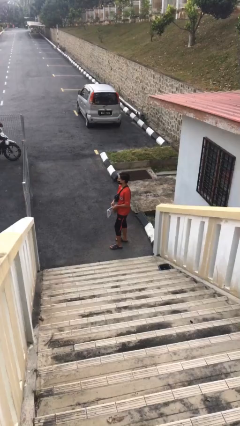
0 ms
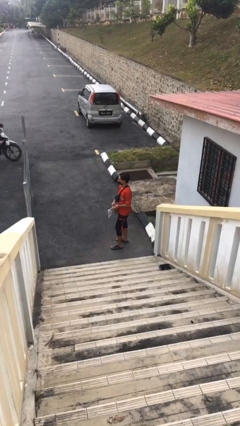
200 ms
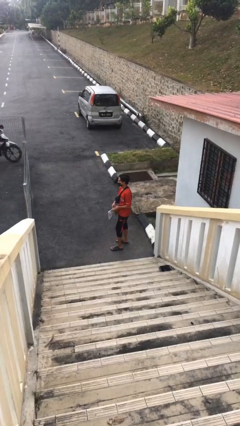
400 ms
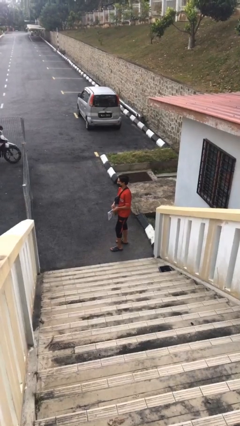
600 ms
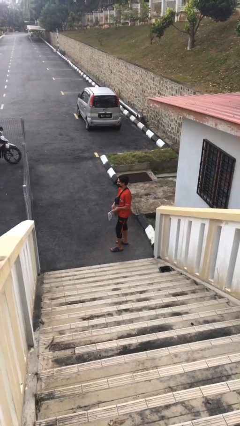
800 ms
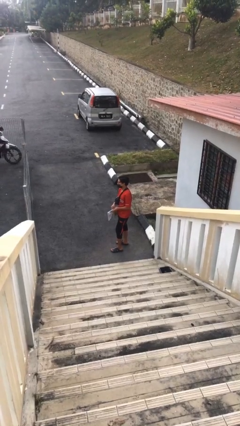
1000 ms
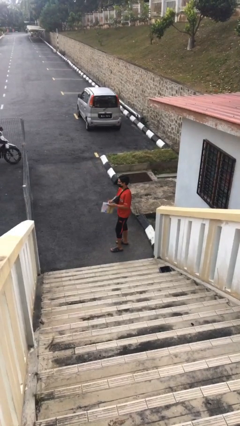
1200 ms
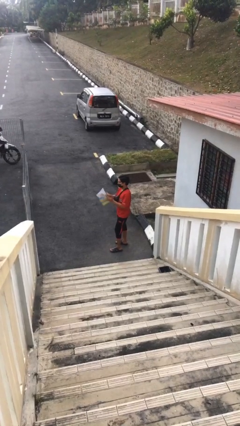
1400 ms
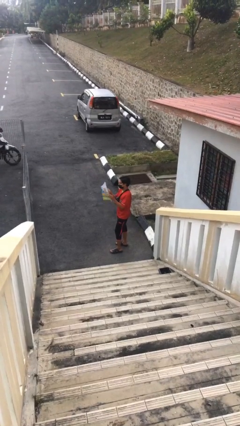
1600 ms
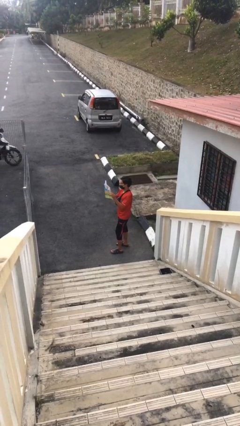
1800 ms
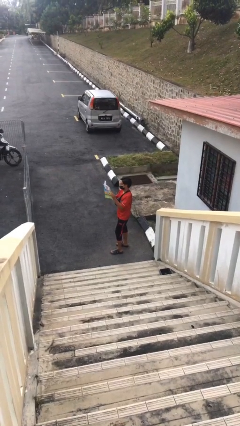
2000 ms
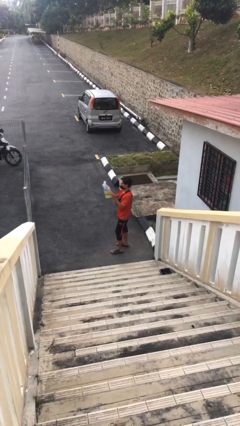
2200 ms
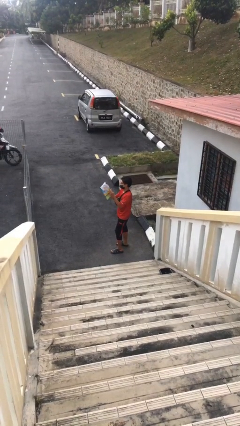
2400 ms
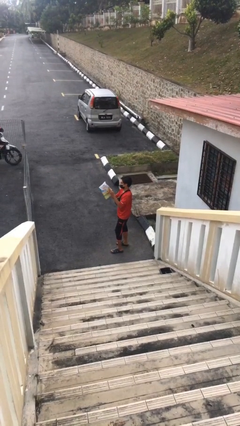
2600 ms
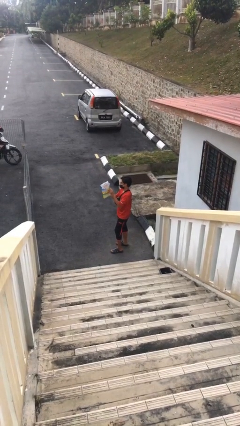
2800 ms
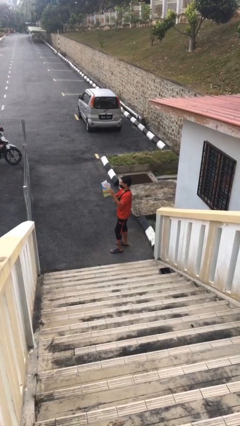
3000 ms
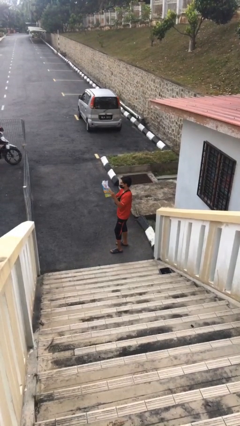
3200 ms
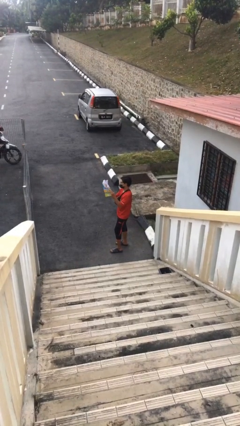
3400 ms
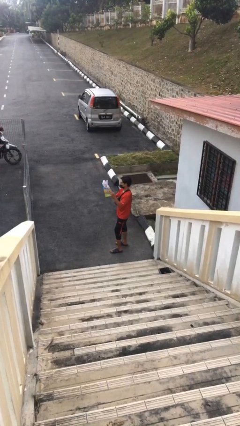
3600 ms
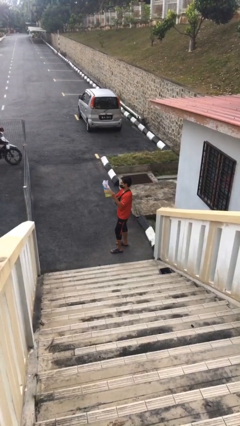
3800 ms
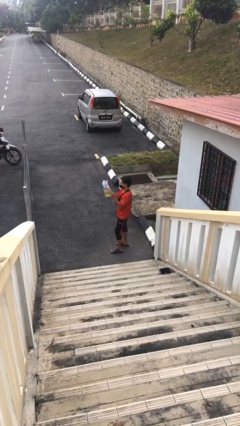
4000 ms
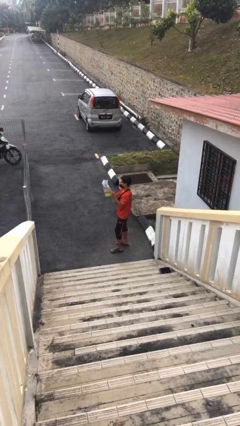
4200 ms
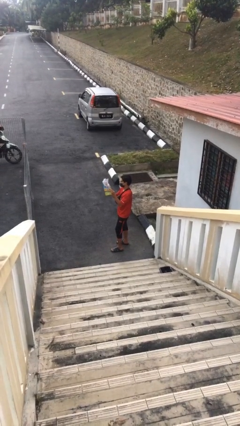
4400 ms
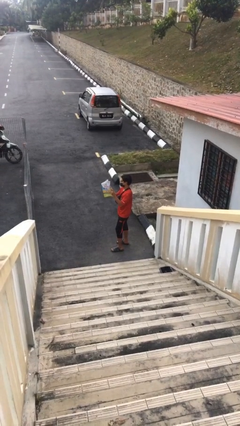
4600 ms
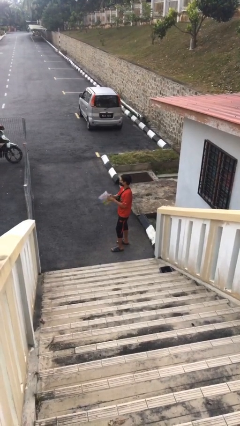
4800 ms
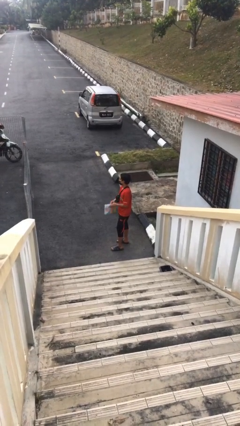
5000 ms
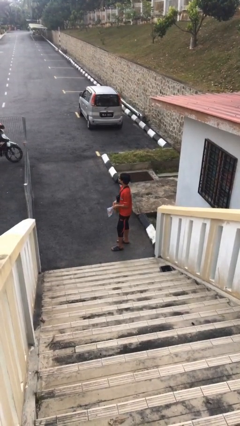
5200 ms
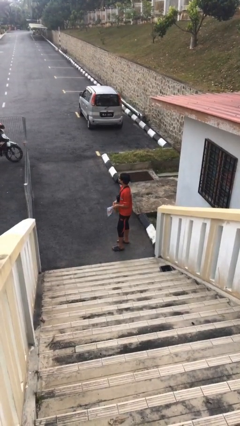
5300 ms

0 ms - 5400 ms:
person reads document

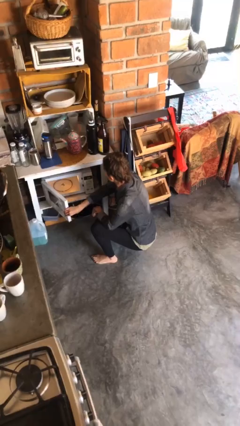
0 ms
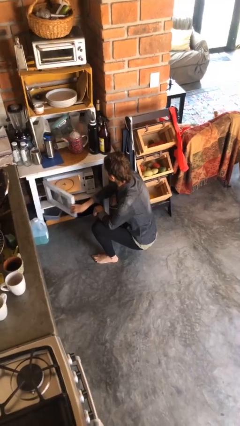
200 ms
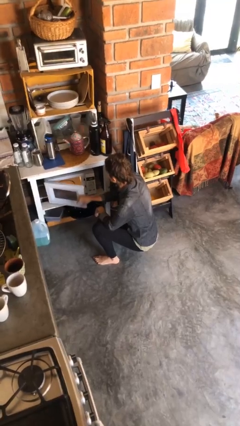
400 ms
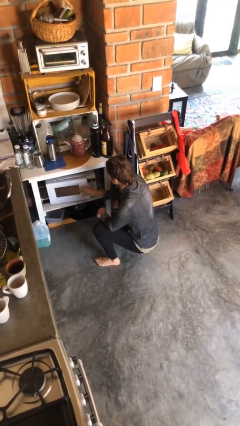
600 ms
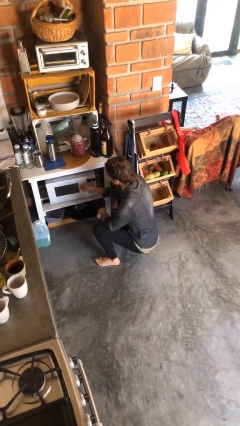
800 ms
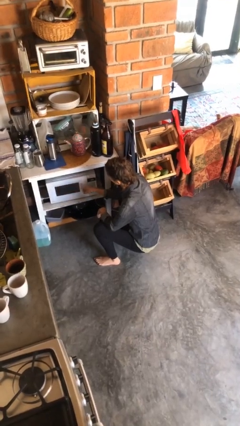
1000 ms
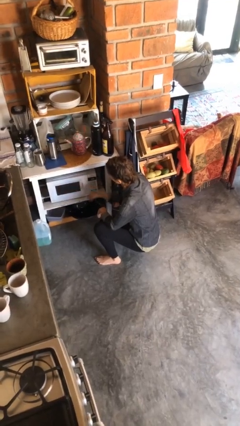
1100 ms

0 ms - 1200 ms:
person closes microwave

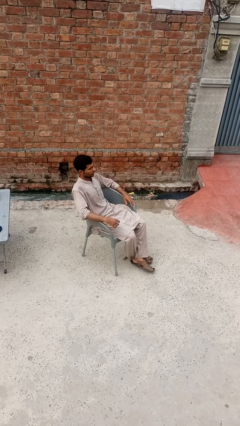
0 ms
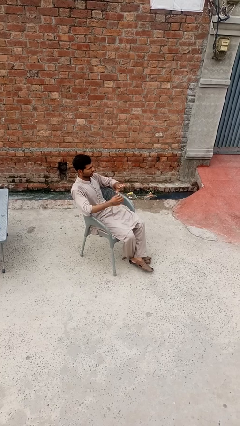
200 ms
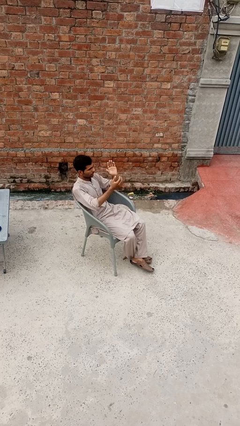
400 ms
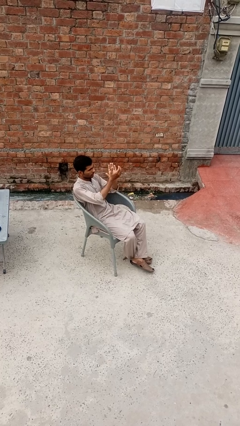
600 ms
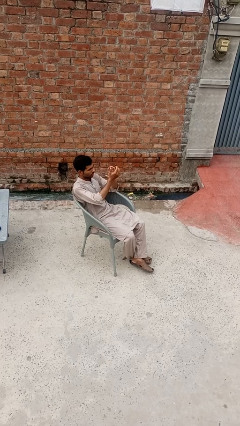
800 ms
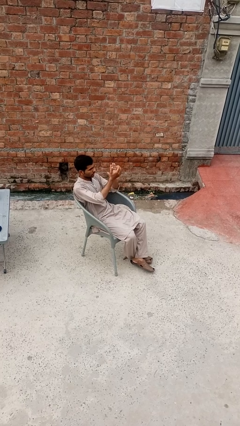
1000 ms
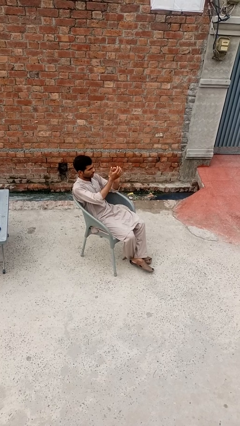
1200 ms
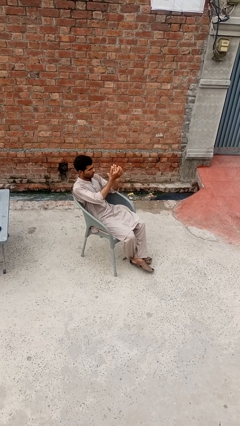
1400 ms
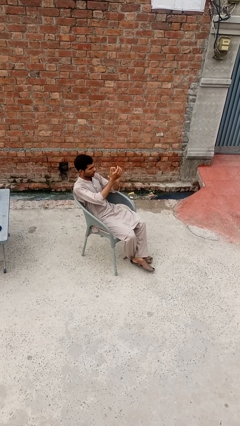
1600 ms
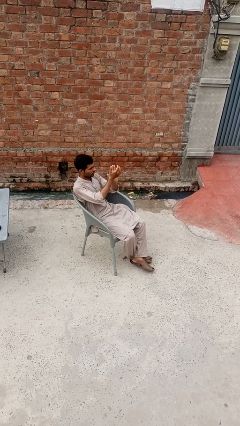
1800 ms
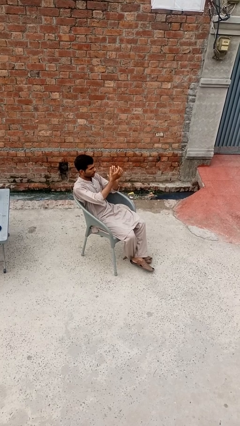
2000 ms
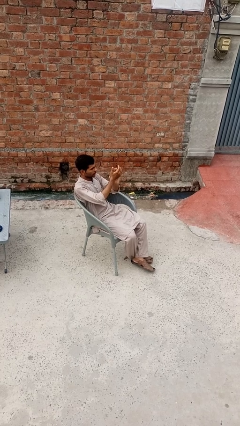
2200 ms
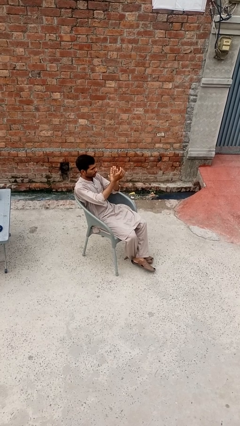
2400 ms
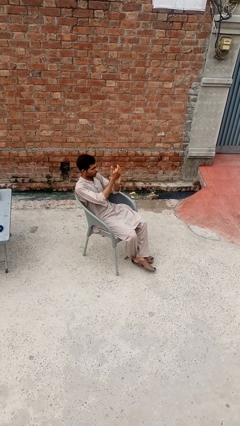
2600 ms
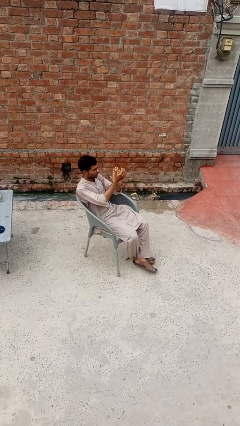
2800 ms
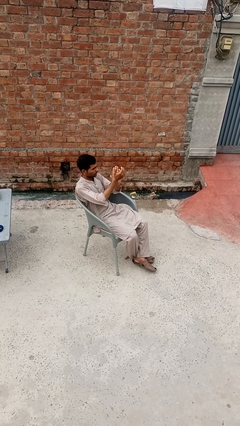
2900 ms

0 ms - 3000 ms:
person claps hands

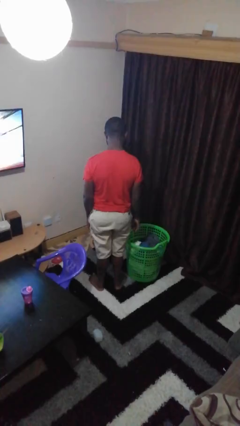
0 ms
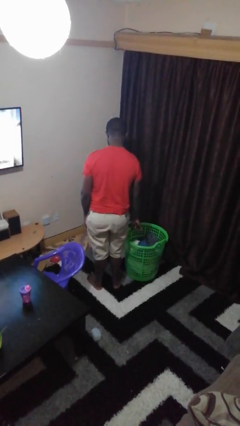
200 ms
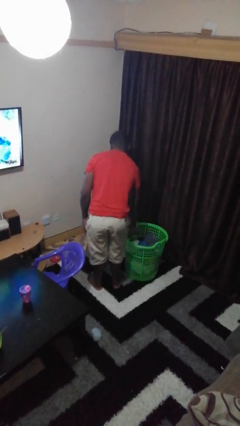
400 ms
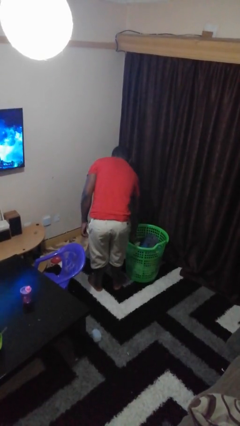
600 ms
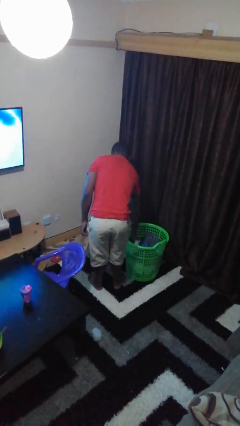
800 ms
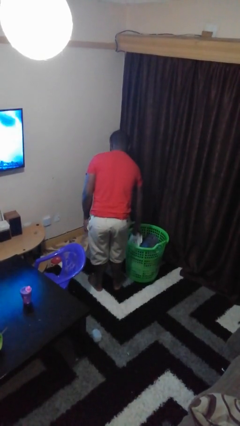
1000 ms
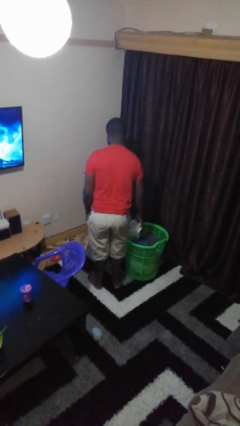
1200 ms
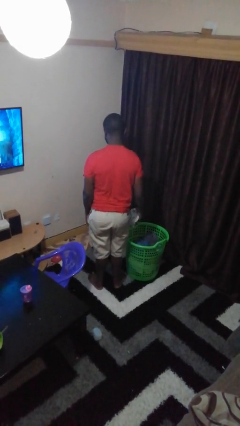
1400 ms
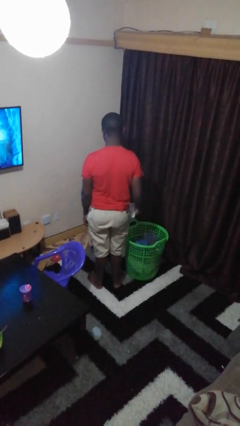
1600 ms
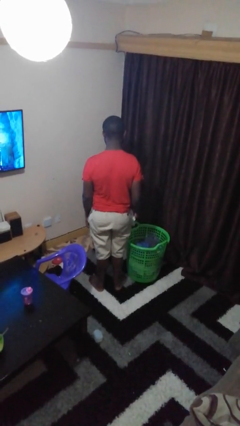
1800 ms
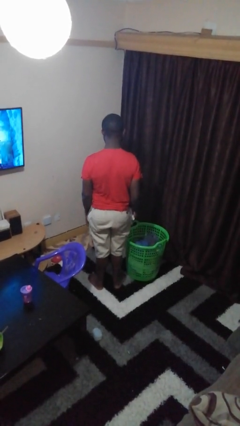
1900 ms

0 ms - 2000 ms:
person takes object from basket

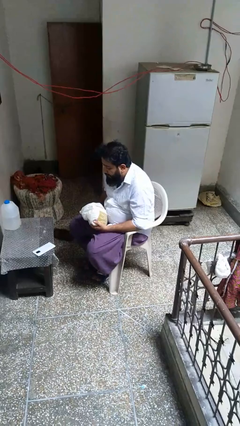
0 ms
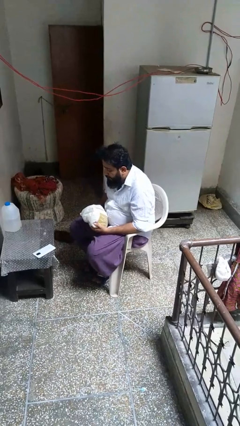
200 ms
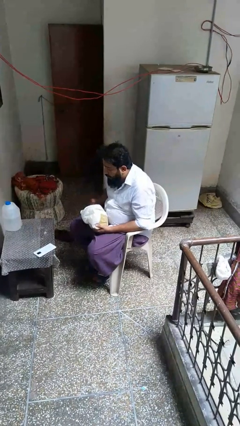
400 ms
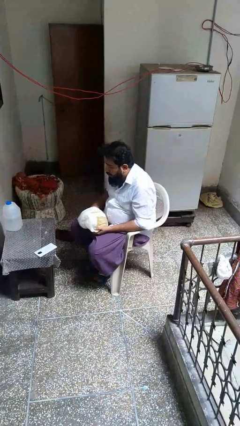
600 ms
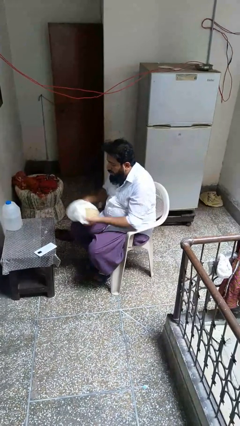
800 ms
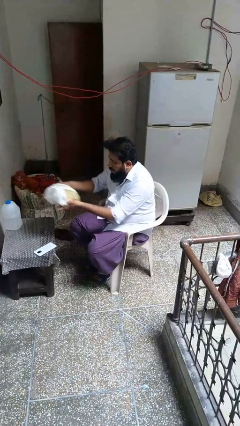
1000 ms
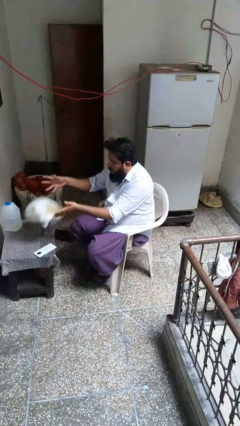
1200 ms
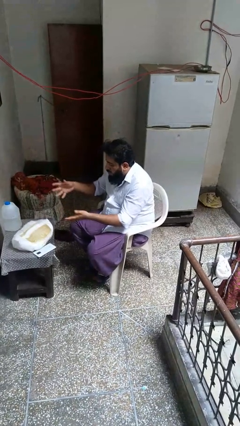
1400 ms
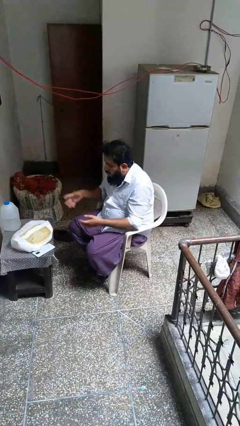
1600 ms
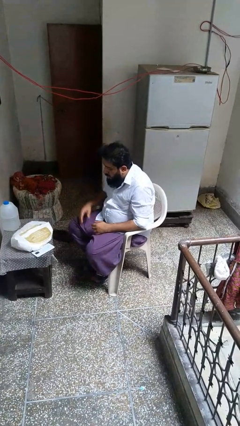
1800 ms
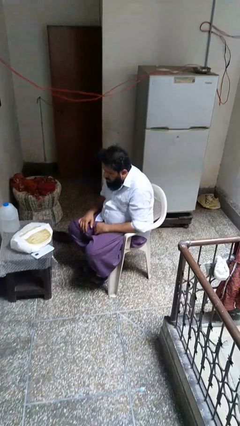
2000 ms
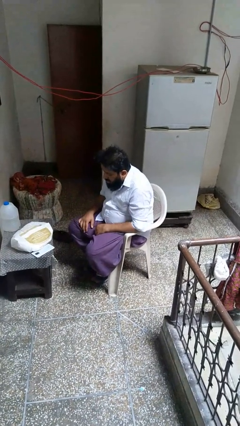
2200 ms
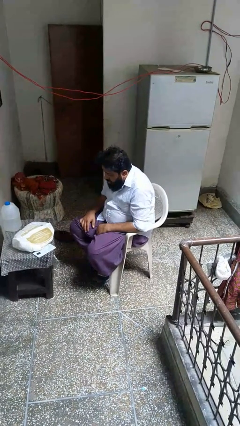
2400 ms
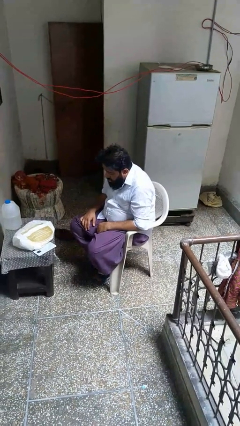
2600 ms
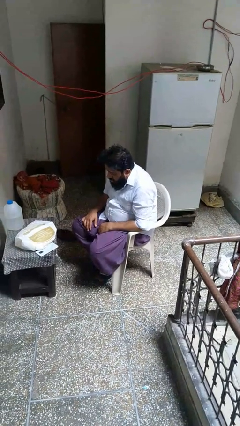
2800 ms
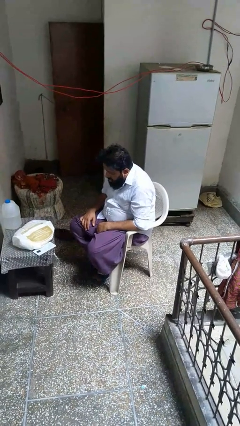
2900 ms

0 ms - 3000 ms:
person throws object on table

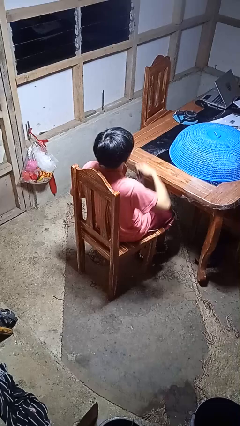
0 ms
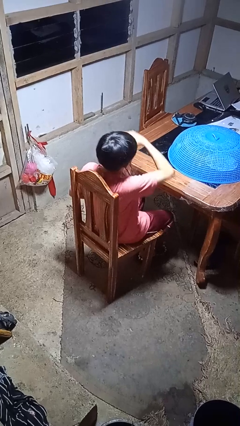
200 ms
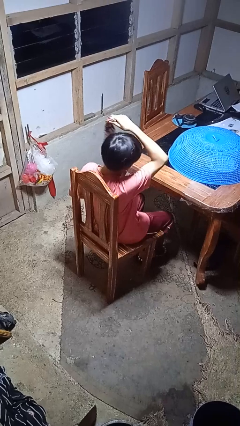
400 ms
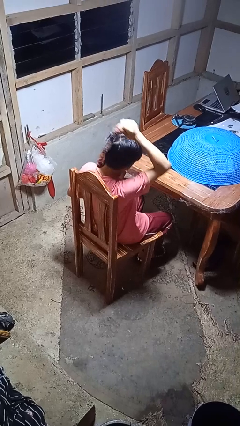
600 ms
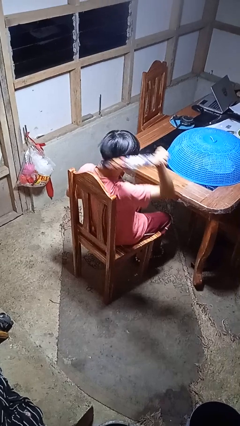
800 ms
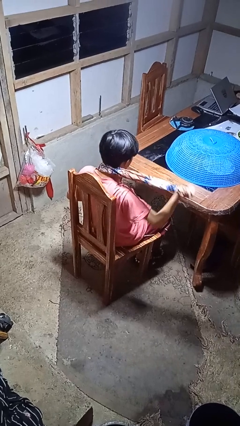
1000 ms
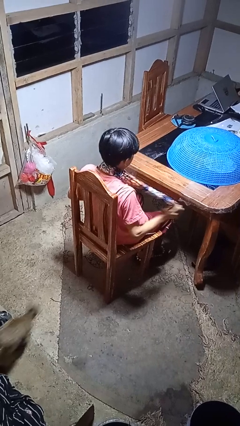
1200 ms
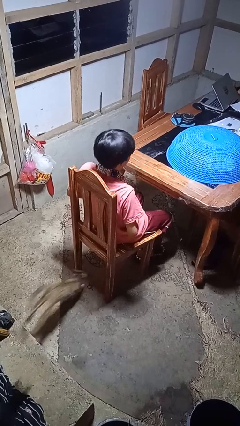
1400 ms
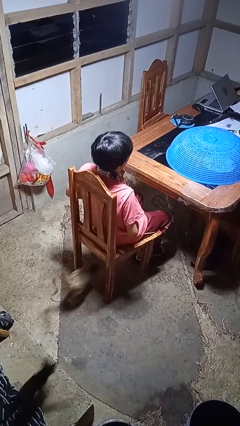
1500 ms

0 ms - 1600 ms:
person puts on scarf

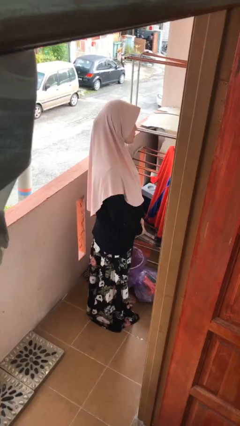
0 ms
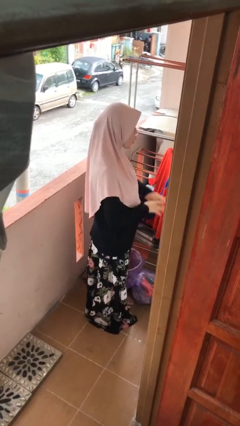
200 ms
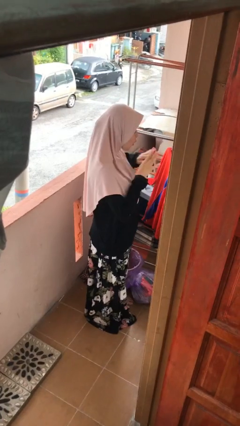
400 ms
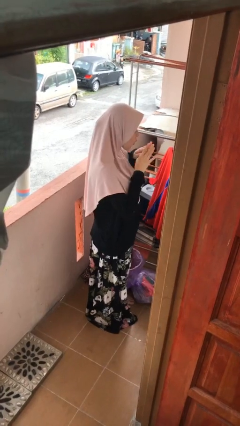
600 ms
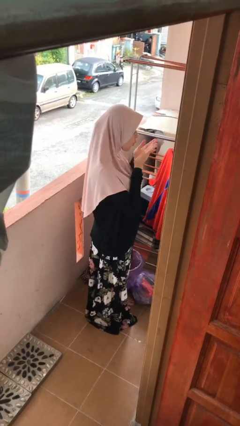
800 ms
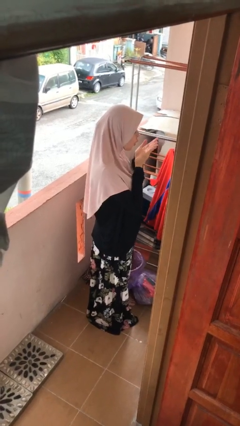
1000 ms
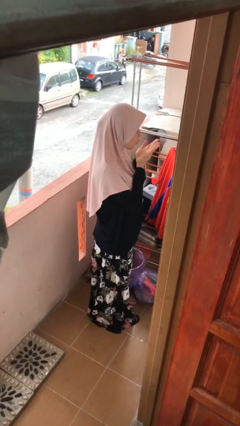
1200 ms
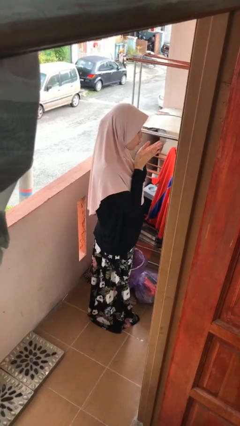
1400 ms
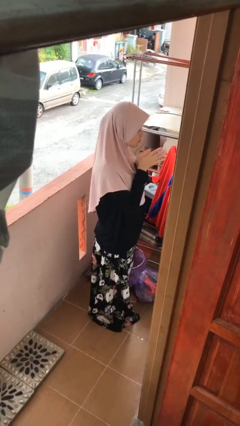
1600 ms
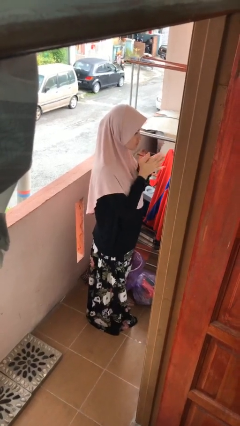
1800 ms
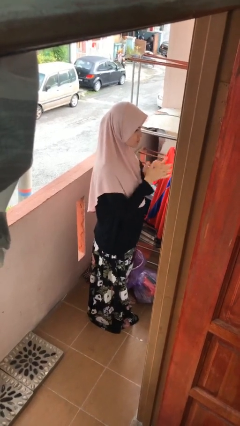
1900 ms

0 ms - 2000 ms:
person blows into hands
